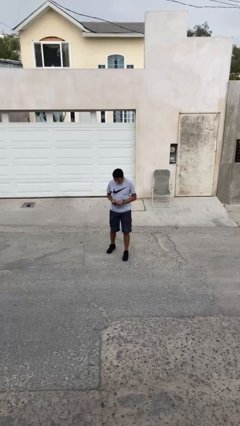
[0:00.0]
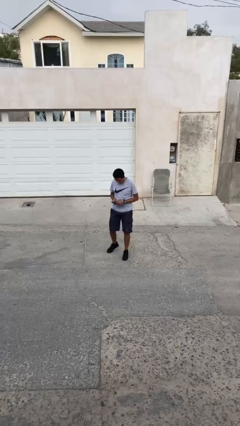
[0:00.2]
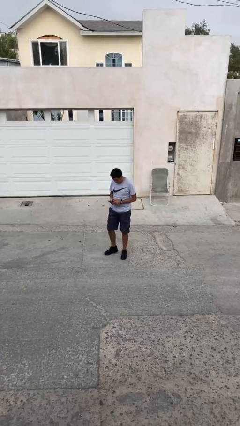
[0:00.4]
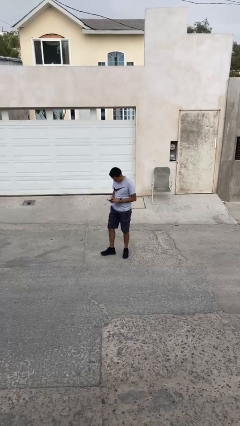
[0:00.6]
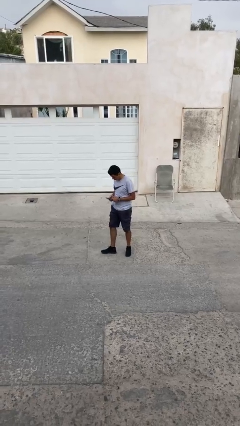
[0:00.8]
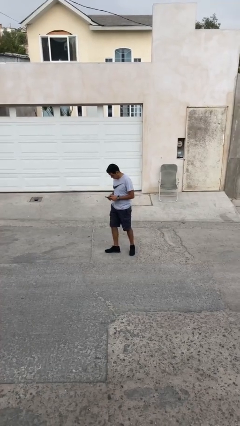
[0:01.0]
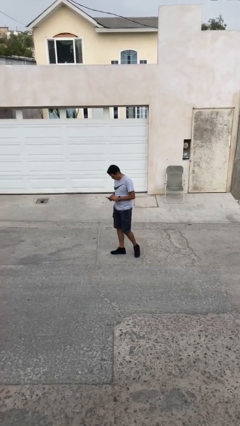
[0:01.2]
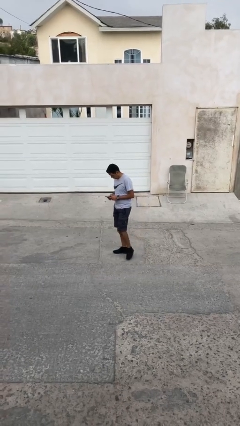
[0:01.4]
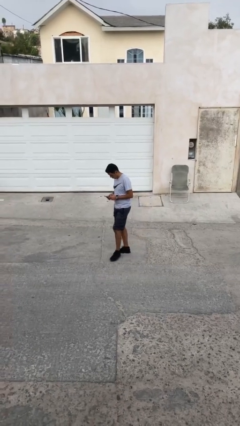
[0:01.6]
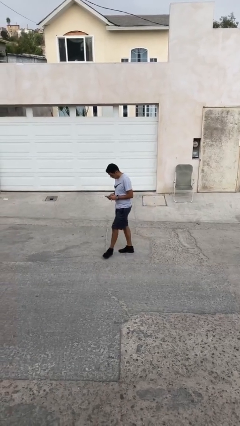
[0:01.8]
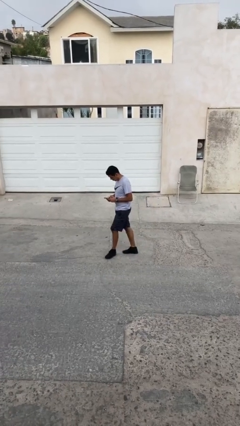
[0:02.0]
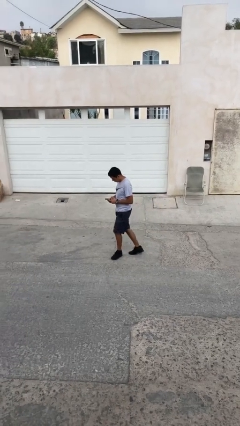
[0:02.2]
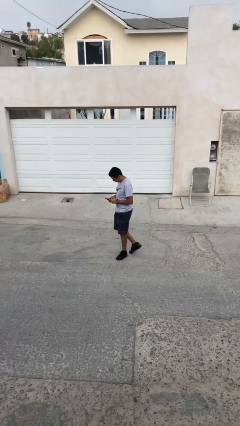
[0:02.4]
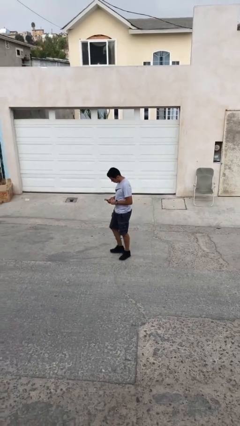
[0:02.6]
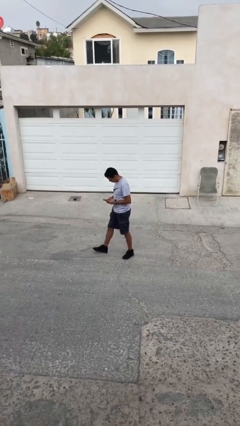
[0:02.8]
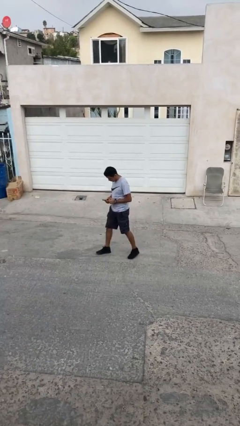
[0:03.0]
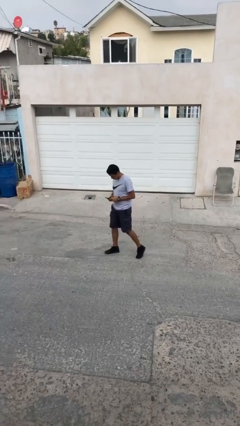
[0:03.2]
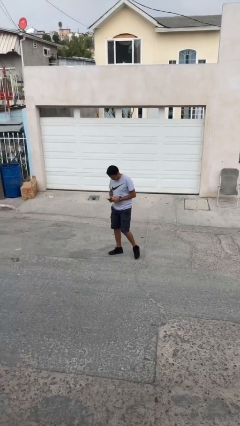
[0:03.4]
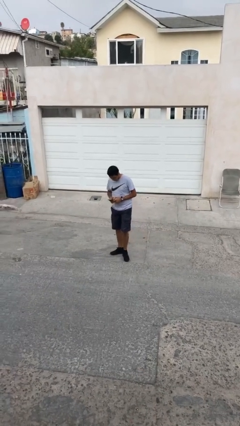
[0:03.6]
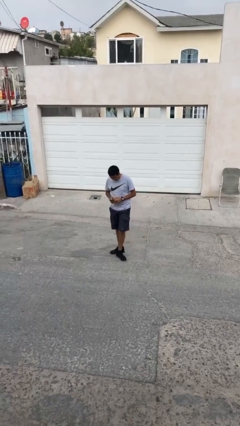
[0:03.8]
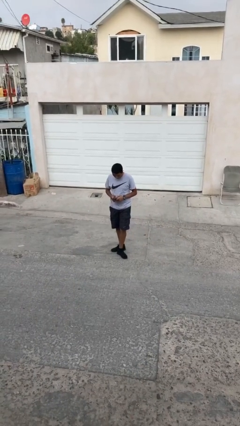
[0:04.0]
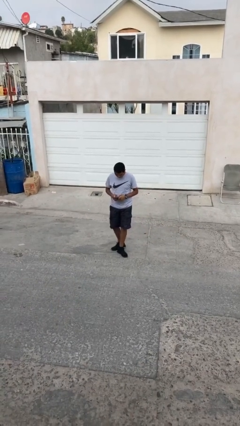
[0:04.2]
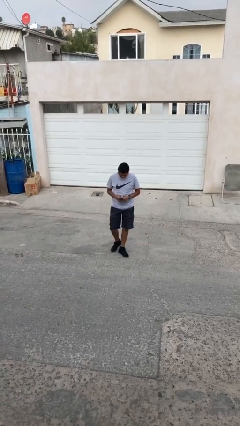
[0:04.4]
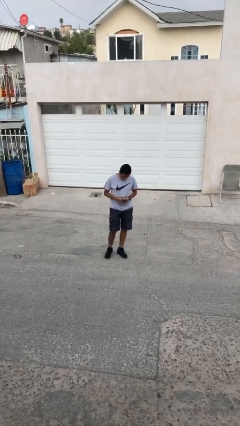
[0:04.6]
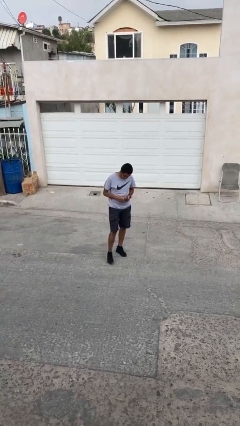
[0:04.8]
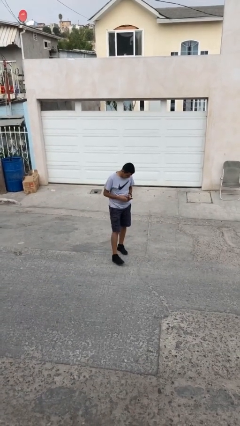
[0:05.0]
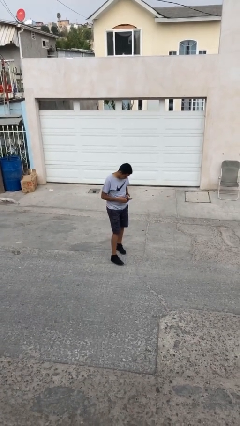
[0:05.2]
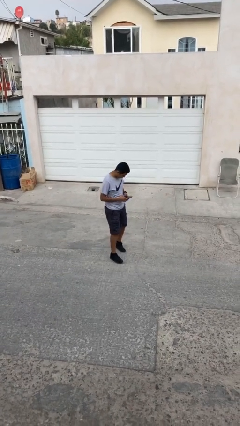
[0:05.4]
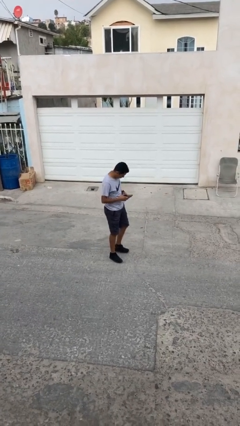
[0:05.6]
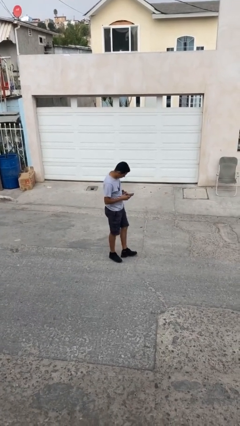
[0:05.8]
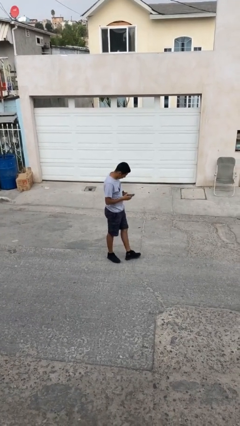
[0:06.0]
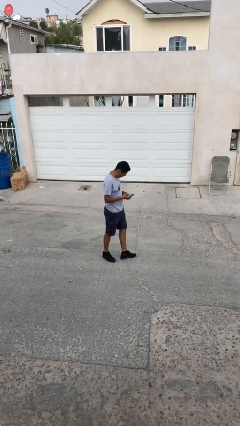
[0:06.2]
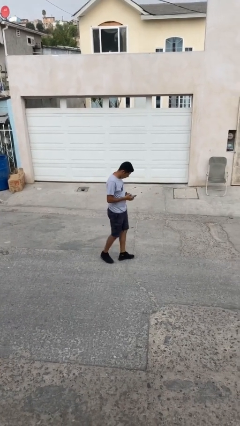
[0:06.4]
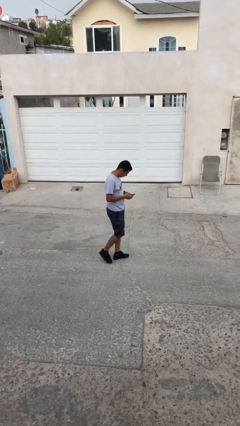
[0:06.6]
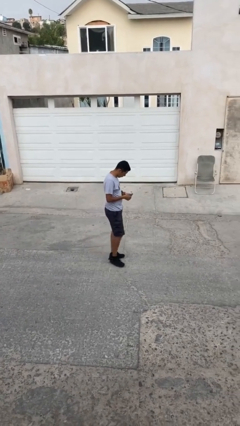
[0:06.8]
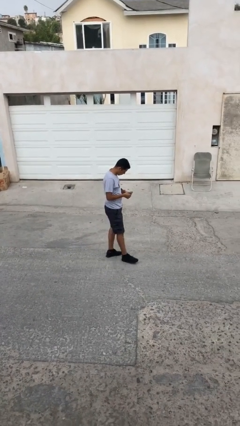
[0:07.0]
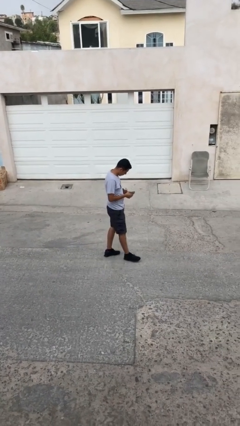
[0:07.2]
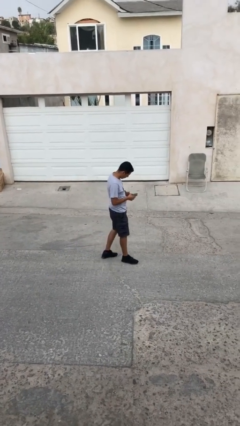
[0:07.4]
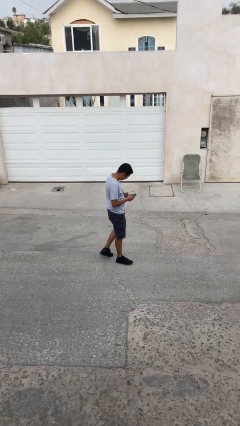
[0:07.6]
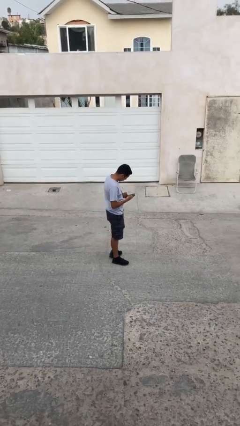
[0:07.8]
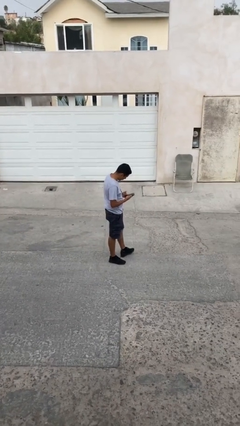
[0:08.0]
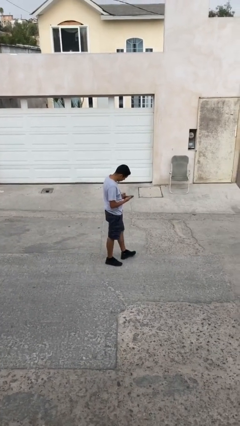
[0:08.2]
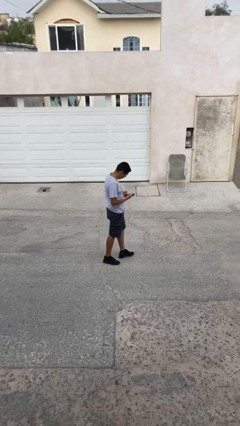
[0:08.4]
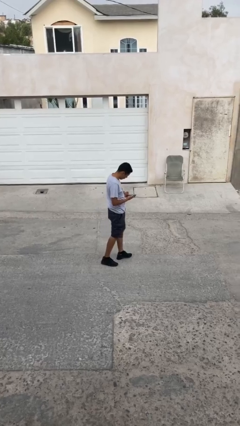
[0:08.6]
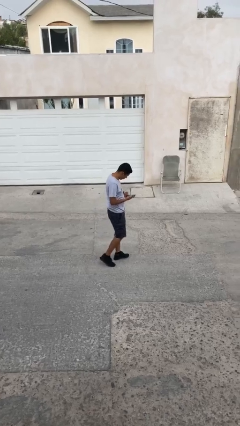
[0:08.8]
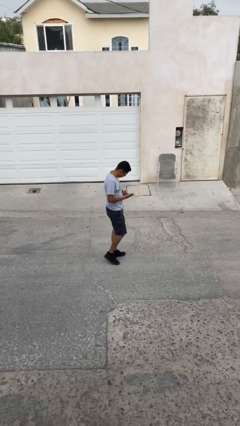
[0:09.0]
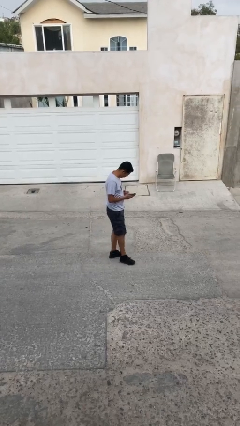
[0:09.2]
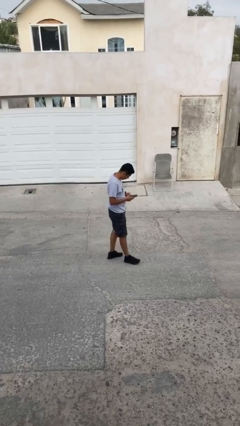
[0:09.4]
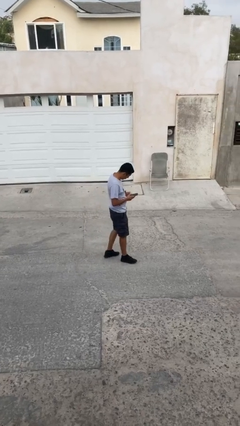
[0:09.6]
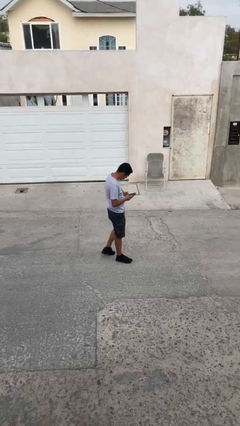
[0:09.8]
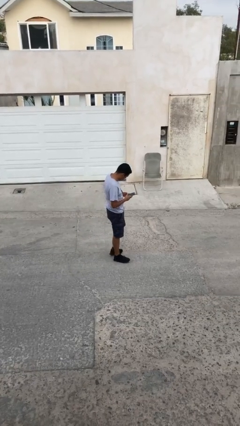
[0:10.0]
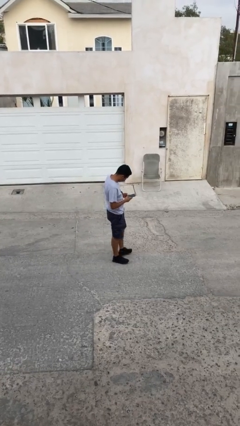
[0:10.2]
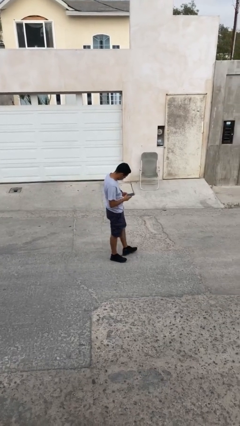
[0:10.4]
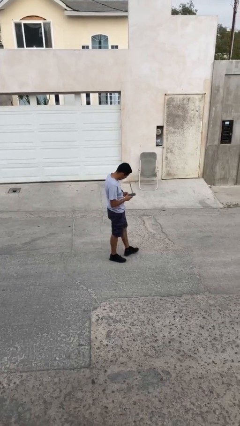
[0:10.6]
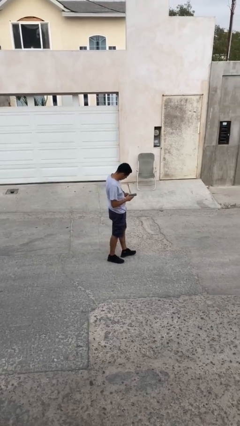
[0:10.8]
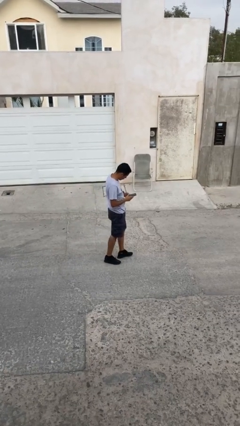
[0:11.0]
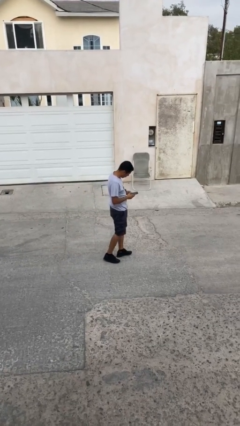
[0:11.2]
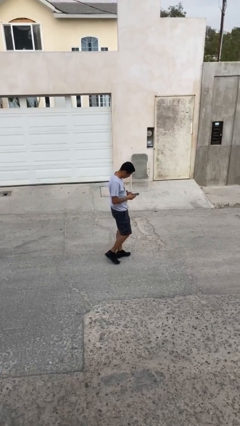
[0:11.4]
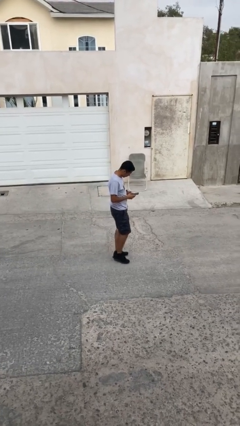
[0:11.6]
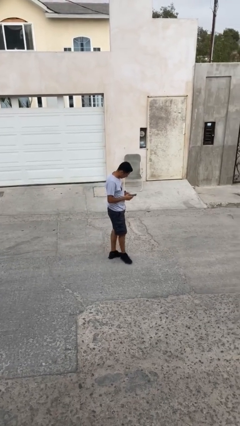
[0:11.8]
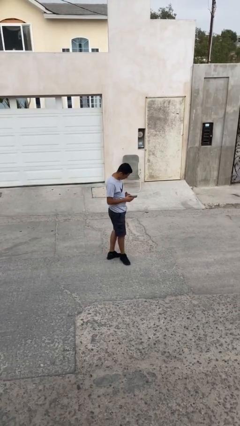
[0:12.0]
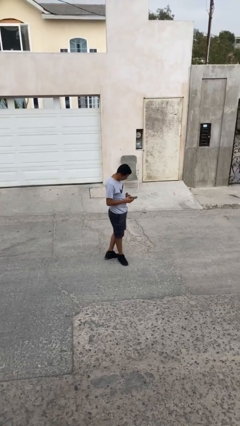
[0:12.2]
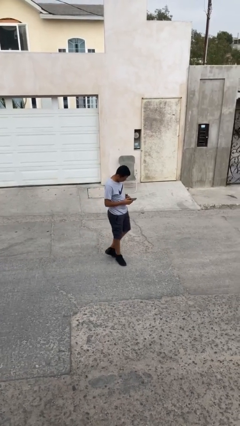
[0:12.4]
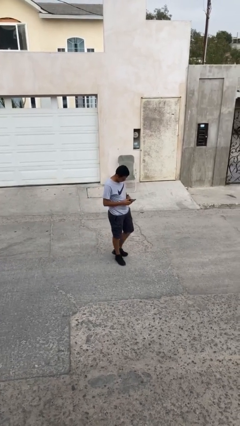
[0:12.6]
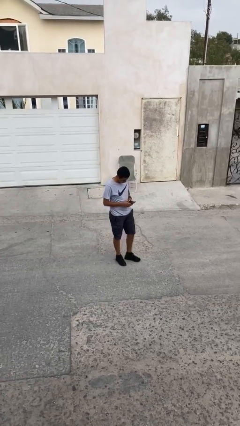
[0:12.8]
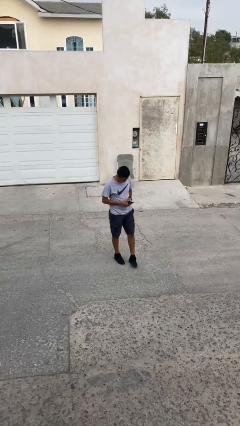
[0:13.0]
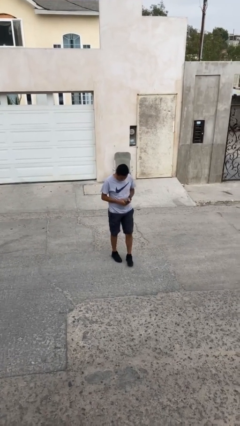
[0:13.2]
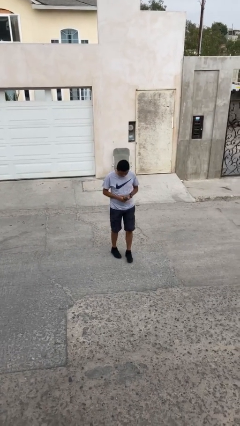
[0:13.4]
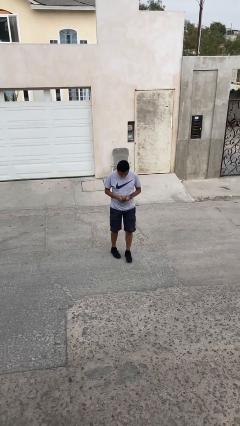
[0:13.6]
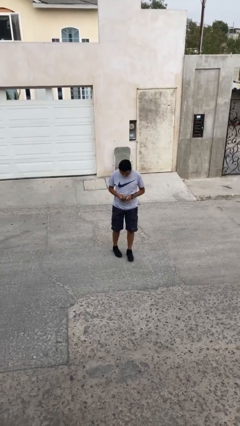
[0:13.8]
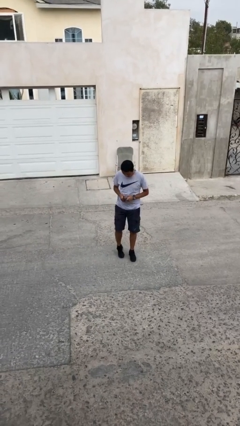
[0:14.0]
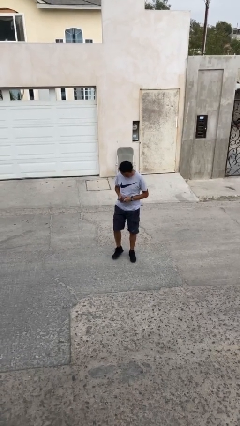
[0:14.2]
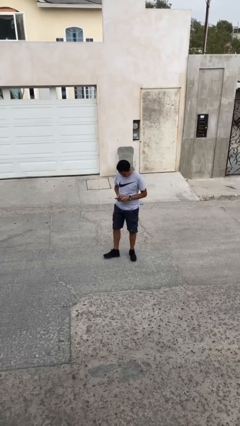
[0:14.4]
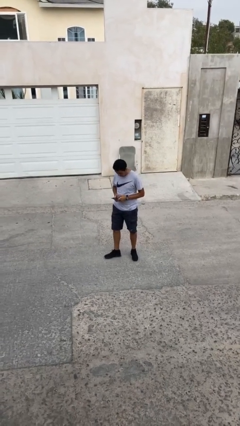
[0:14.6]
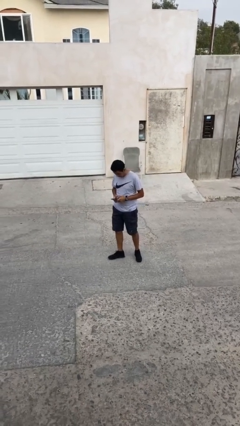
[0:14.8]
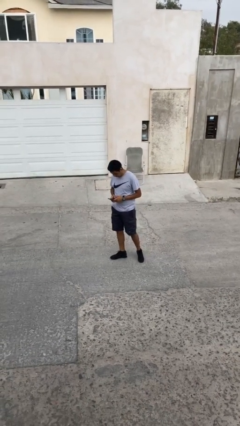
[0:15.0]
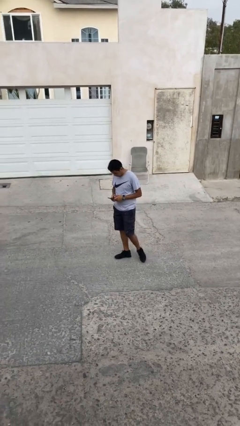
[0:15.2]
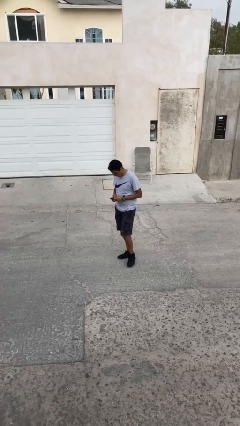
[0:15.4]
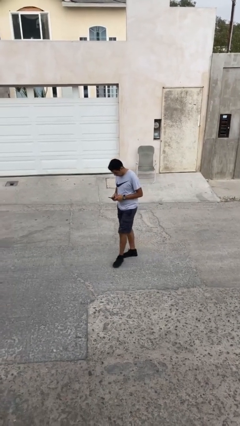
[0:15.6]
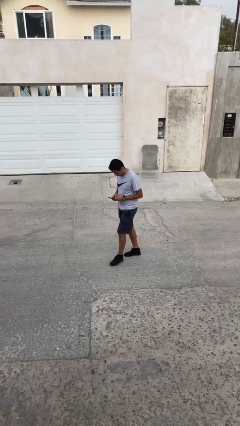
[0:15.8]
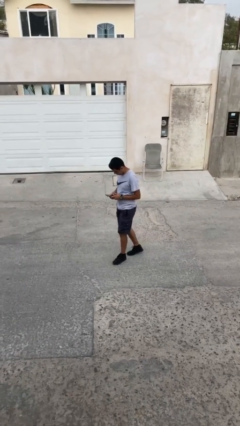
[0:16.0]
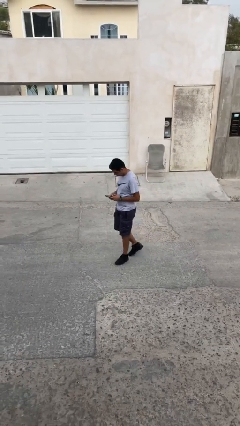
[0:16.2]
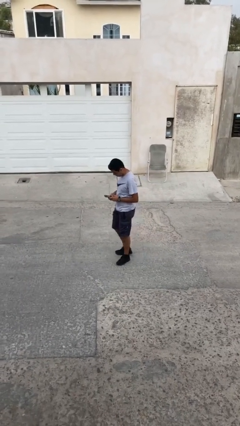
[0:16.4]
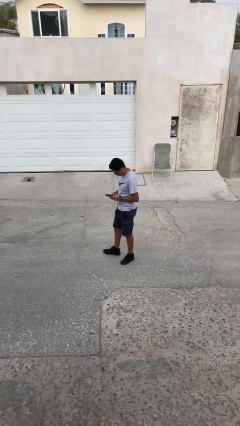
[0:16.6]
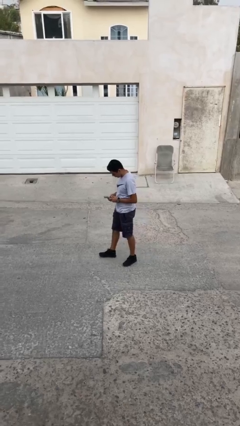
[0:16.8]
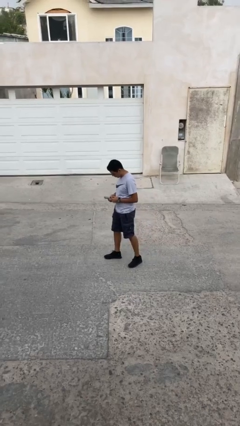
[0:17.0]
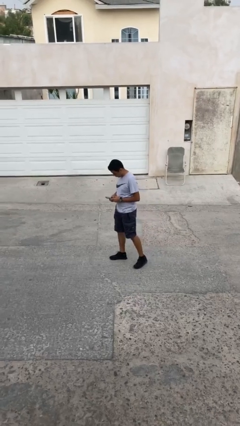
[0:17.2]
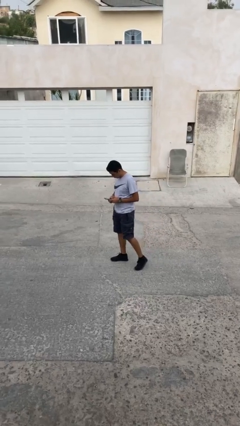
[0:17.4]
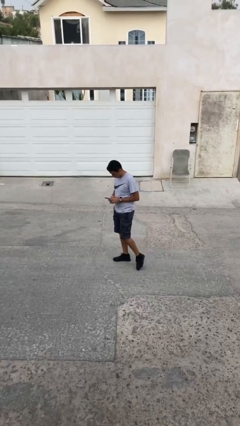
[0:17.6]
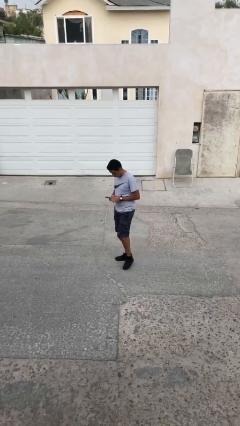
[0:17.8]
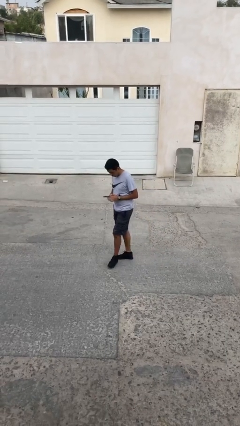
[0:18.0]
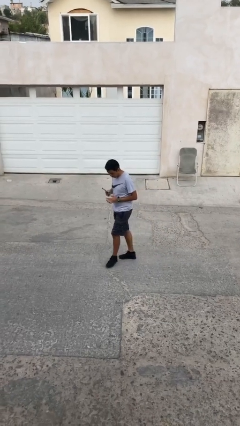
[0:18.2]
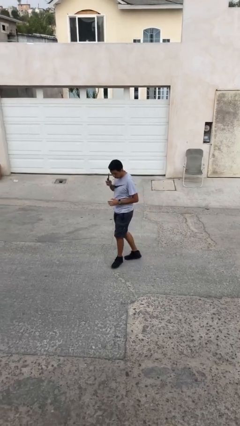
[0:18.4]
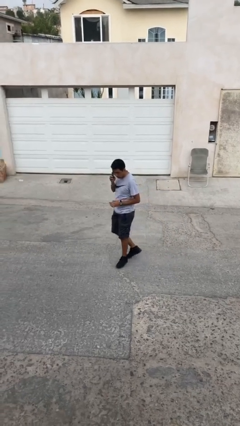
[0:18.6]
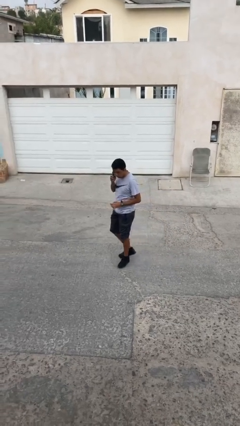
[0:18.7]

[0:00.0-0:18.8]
person texts on phone
